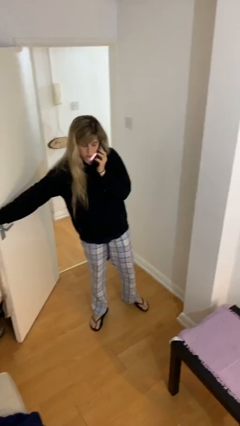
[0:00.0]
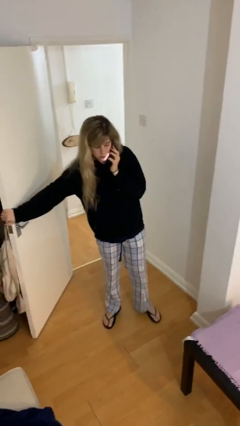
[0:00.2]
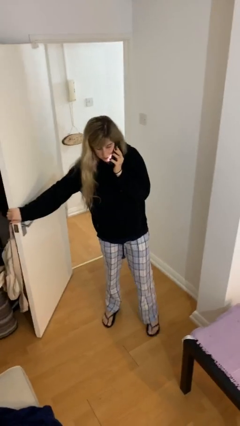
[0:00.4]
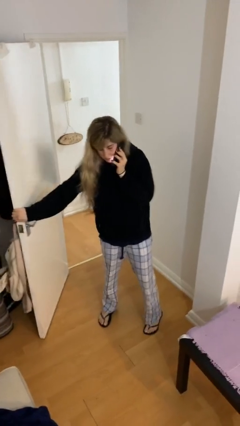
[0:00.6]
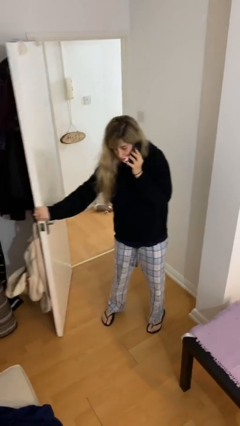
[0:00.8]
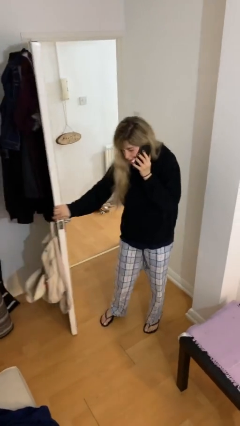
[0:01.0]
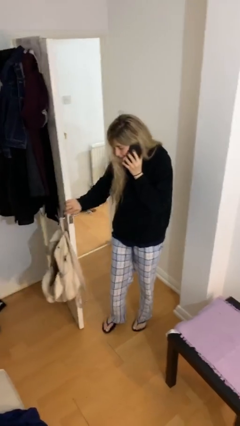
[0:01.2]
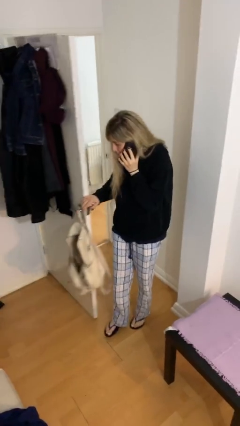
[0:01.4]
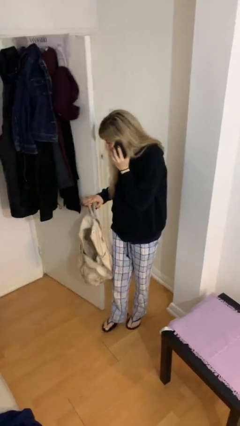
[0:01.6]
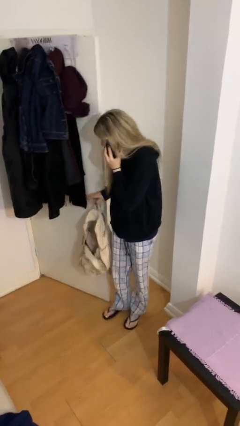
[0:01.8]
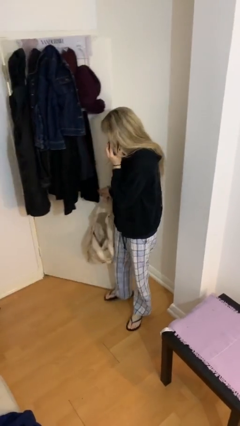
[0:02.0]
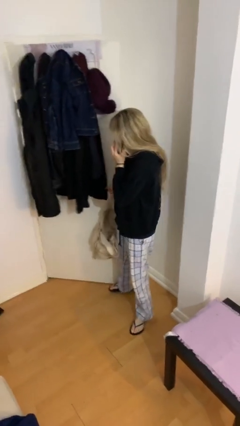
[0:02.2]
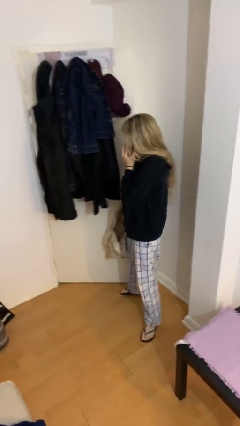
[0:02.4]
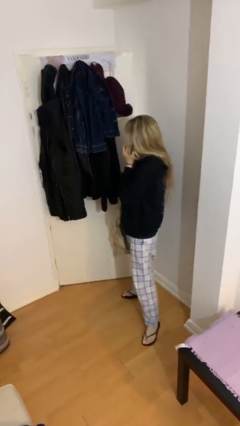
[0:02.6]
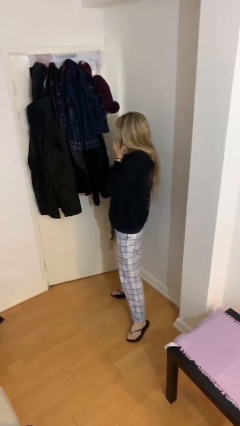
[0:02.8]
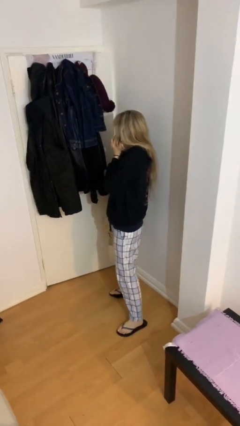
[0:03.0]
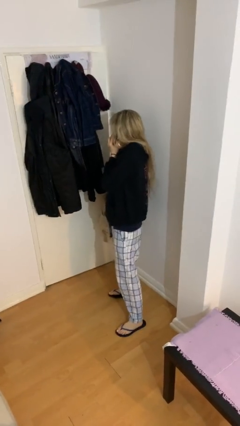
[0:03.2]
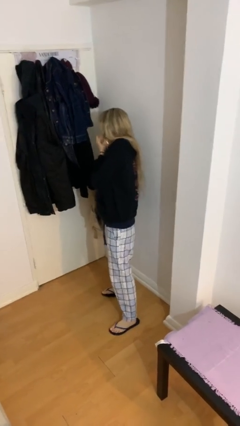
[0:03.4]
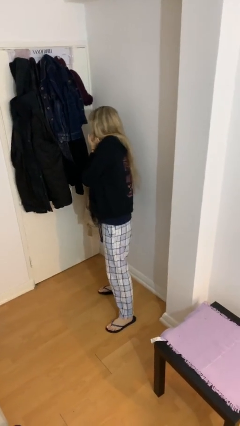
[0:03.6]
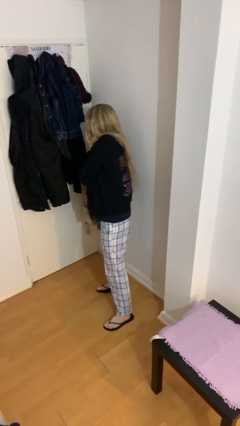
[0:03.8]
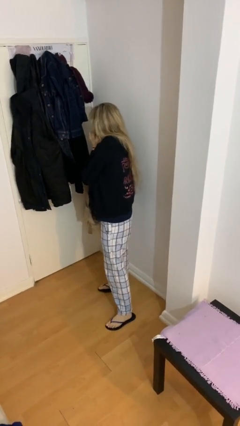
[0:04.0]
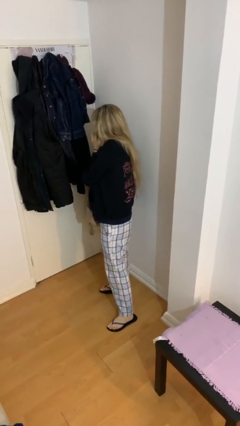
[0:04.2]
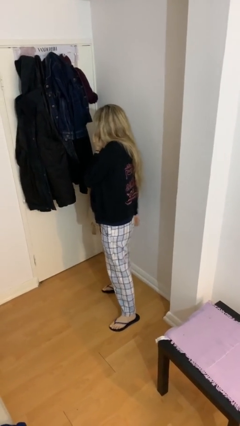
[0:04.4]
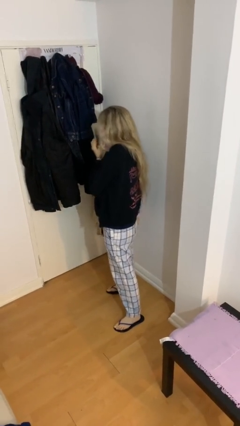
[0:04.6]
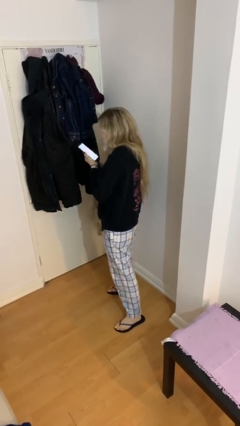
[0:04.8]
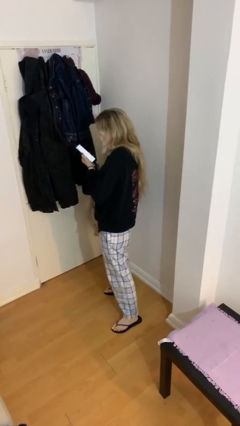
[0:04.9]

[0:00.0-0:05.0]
person closes facility door

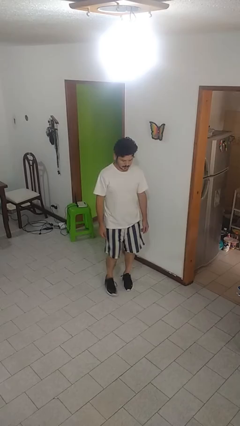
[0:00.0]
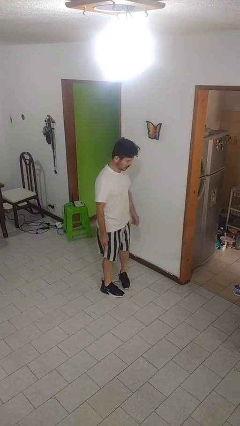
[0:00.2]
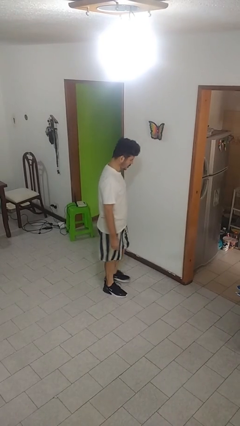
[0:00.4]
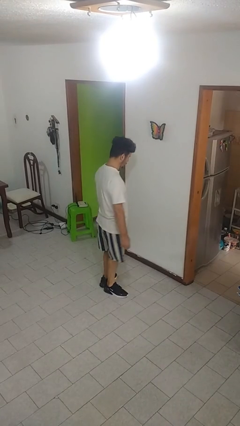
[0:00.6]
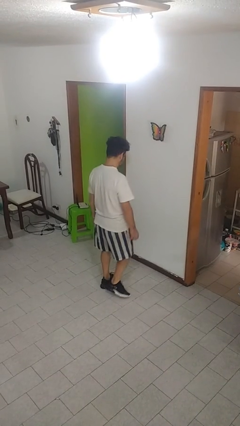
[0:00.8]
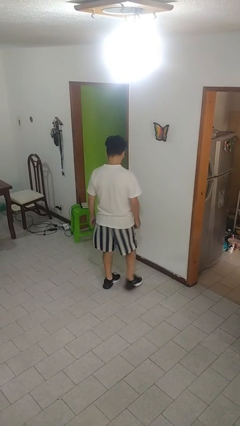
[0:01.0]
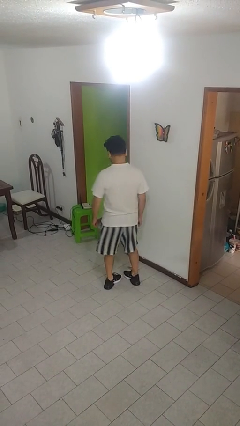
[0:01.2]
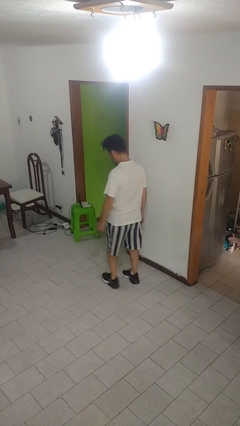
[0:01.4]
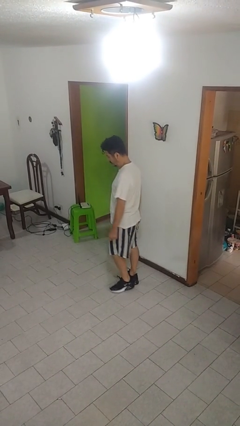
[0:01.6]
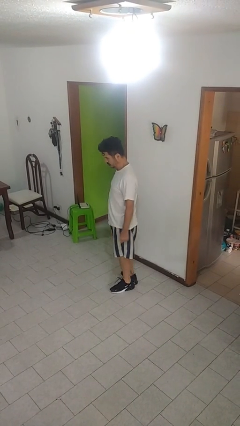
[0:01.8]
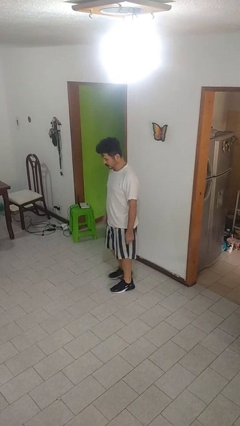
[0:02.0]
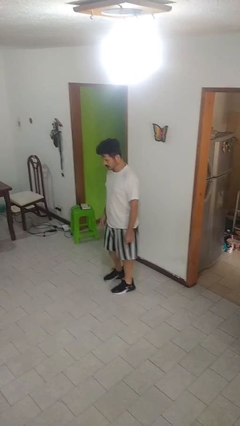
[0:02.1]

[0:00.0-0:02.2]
person twirls

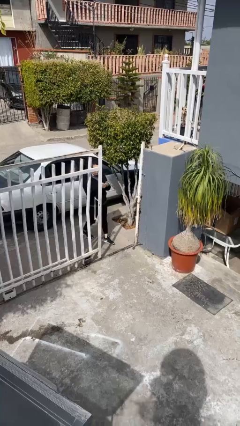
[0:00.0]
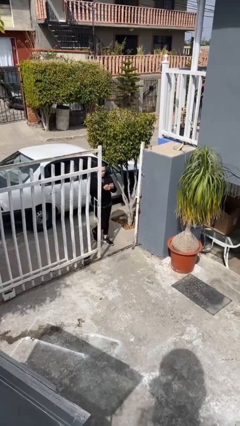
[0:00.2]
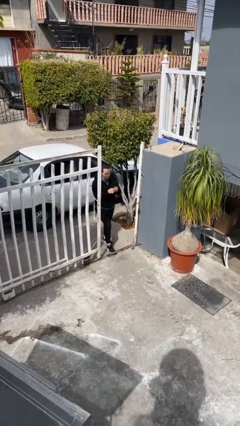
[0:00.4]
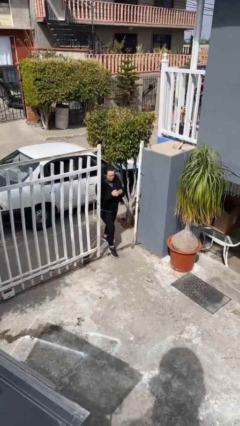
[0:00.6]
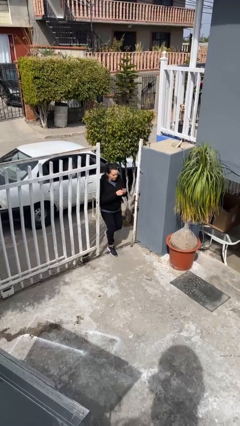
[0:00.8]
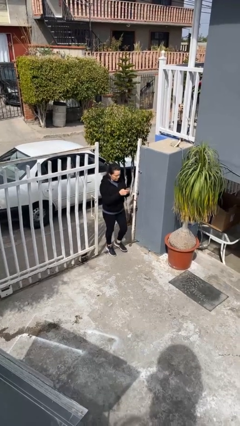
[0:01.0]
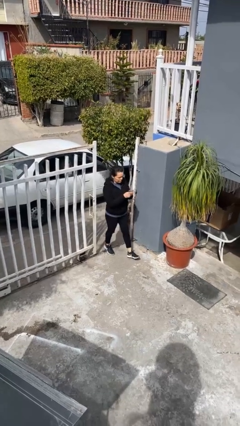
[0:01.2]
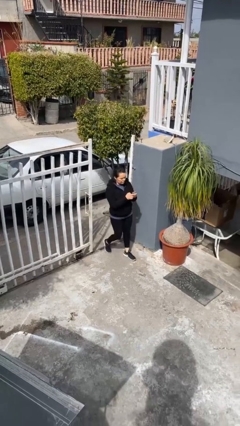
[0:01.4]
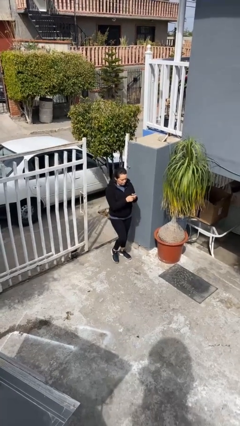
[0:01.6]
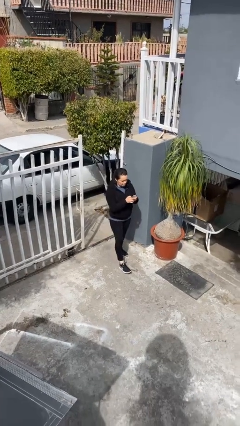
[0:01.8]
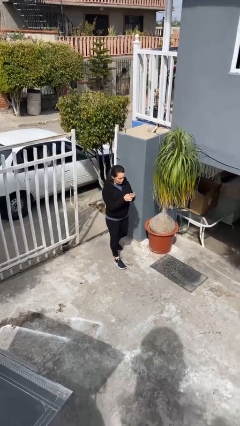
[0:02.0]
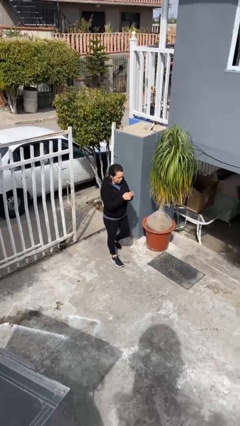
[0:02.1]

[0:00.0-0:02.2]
person enters scene through structure

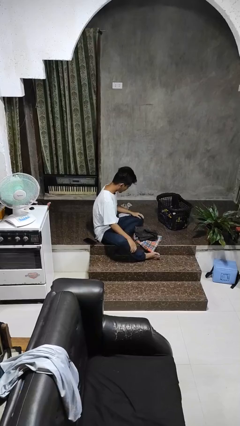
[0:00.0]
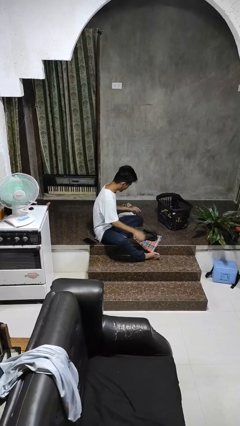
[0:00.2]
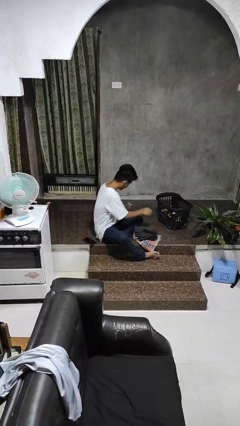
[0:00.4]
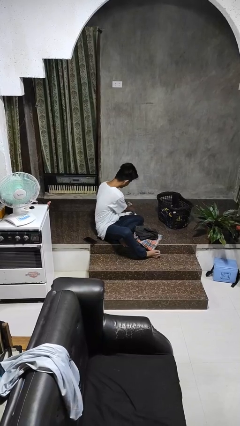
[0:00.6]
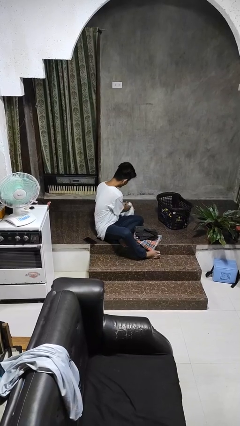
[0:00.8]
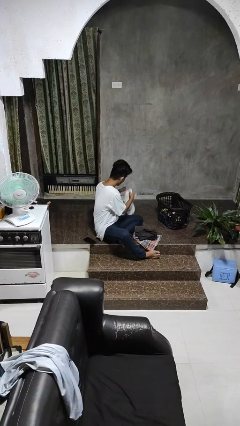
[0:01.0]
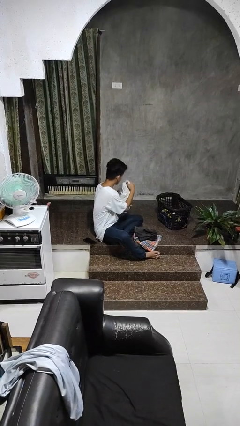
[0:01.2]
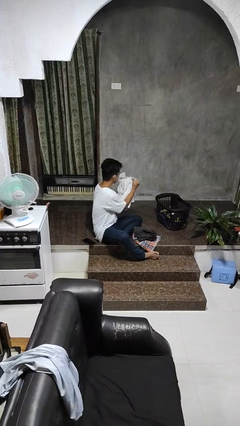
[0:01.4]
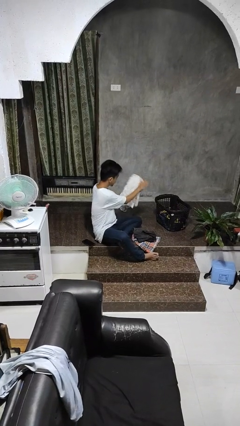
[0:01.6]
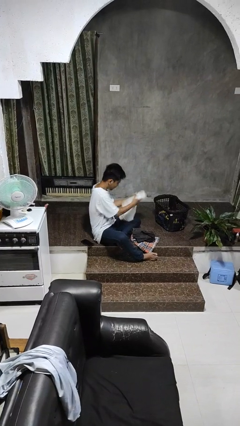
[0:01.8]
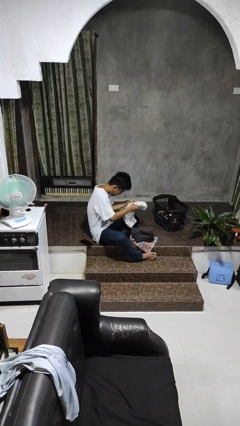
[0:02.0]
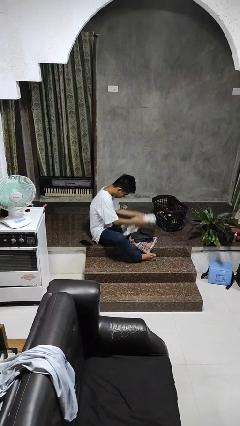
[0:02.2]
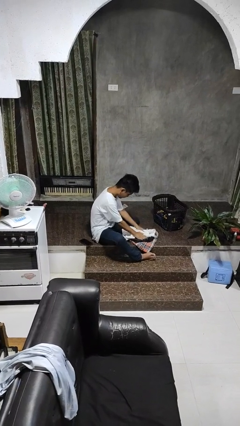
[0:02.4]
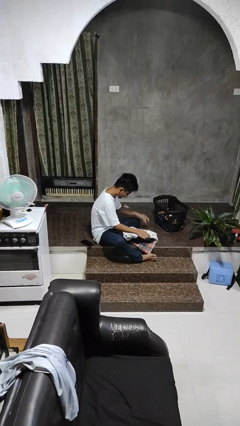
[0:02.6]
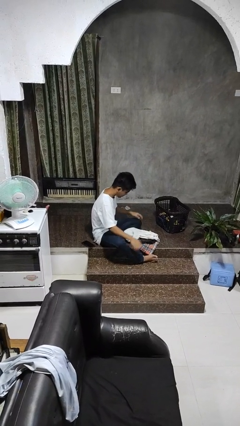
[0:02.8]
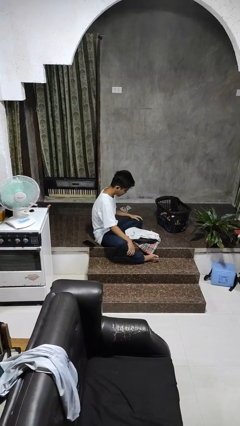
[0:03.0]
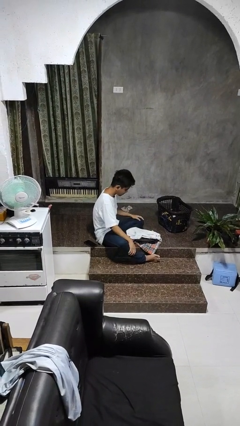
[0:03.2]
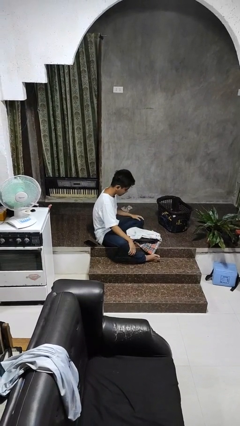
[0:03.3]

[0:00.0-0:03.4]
person folds pants

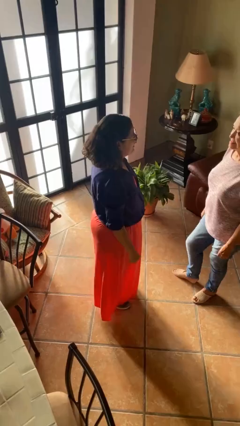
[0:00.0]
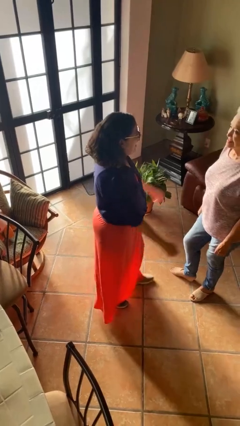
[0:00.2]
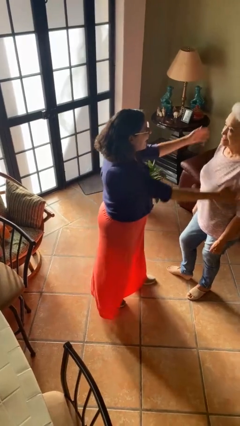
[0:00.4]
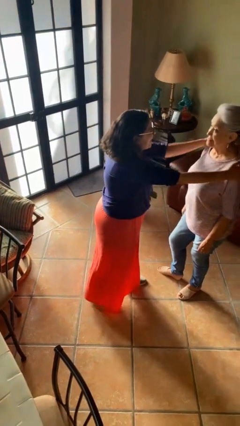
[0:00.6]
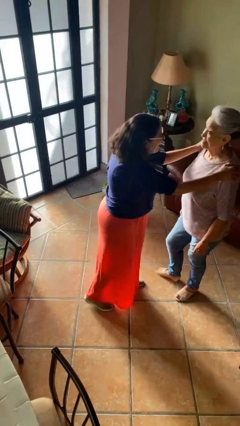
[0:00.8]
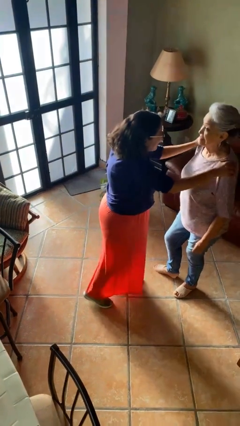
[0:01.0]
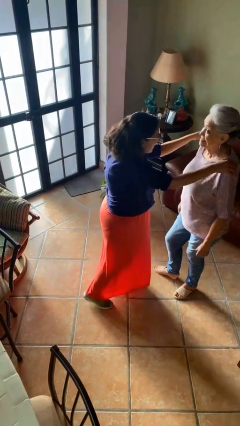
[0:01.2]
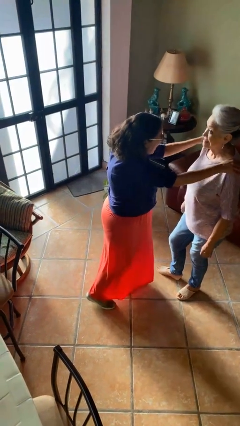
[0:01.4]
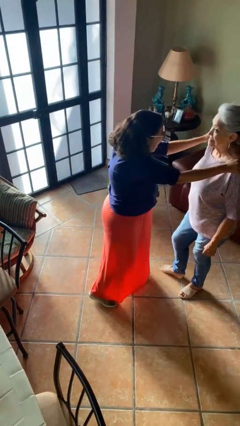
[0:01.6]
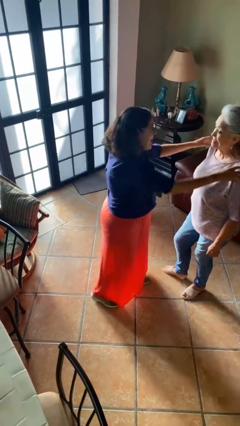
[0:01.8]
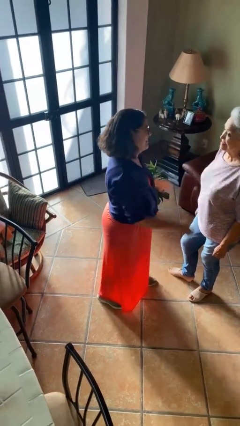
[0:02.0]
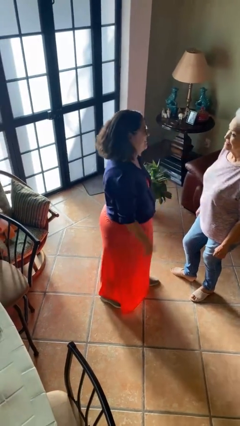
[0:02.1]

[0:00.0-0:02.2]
person pounds shoulders of person

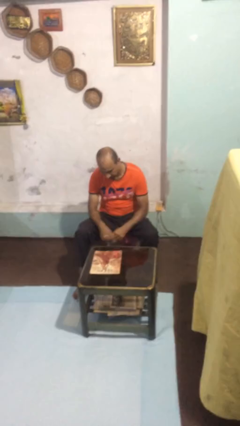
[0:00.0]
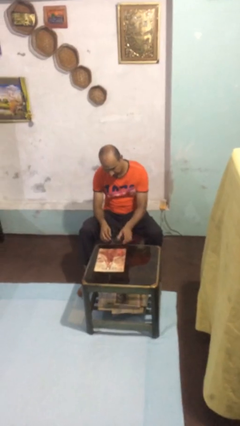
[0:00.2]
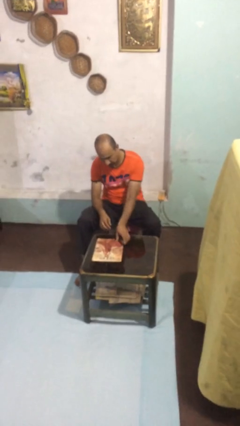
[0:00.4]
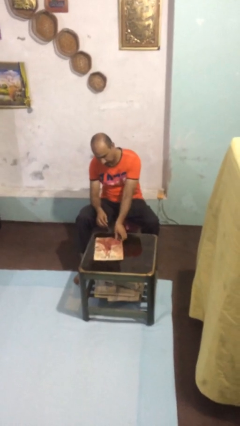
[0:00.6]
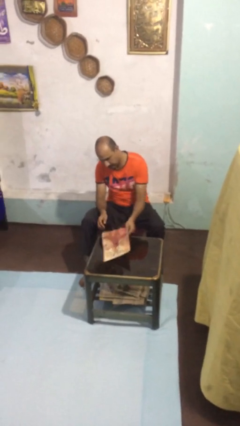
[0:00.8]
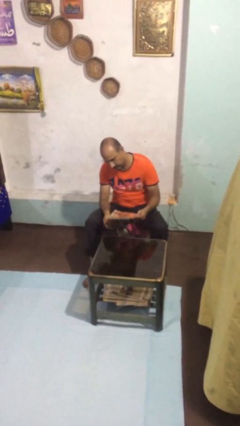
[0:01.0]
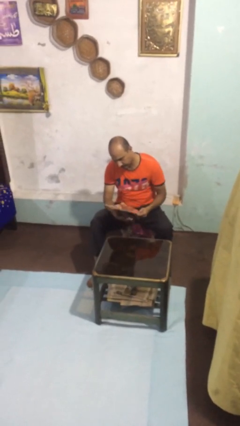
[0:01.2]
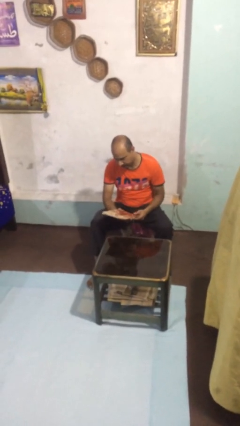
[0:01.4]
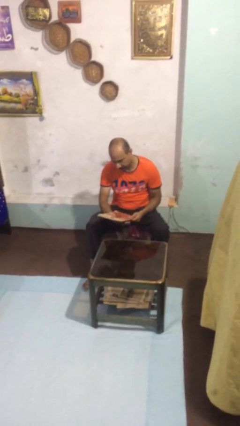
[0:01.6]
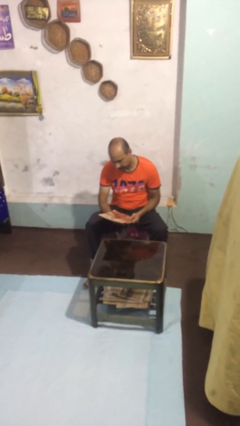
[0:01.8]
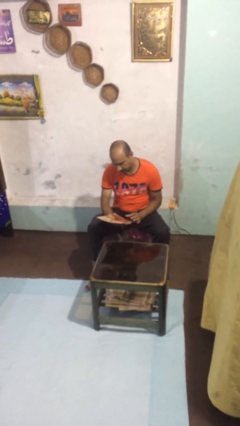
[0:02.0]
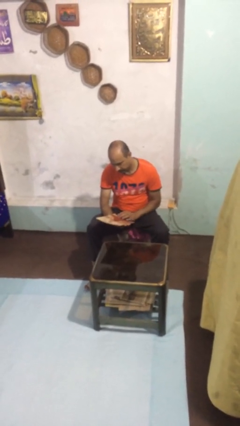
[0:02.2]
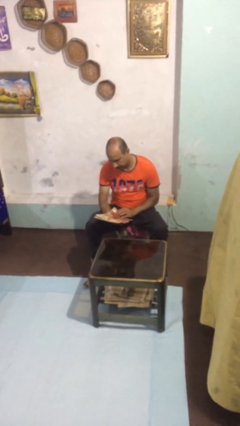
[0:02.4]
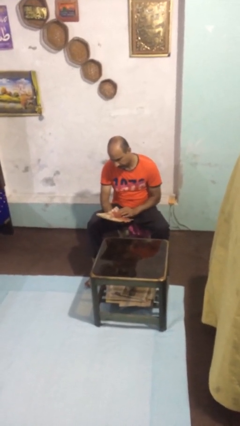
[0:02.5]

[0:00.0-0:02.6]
person picks up object from table
